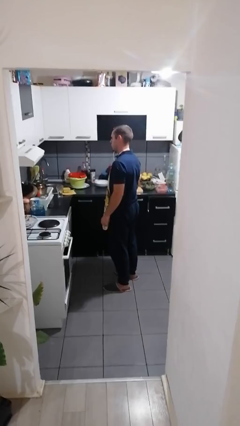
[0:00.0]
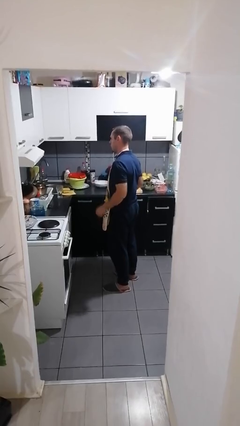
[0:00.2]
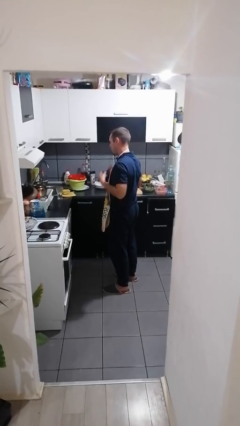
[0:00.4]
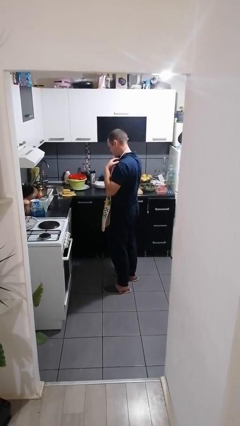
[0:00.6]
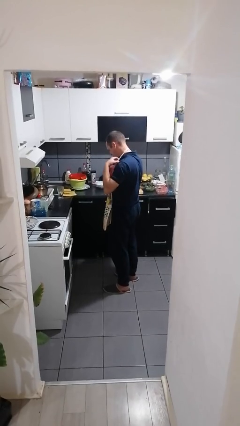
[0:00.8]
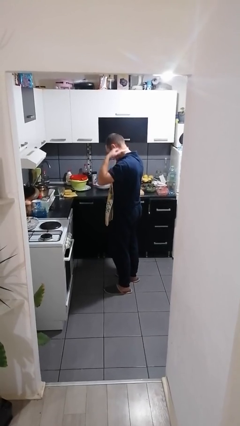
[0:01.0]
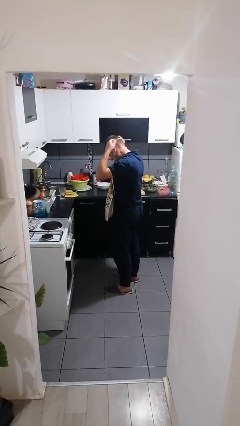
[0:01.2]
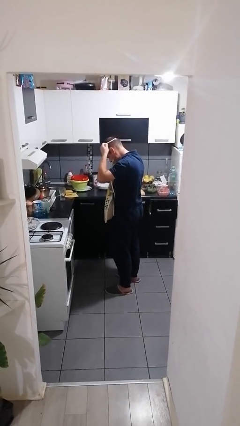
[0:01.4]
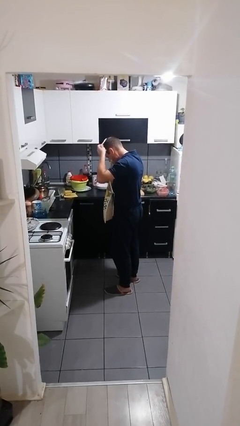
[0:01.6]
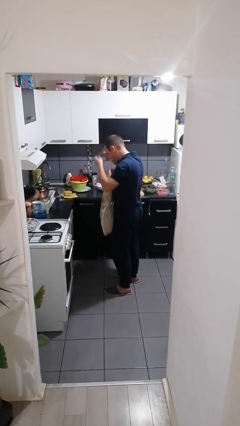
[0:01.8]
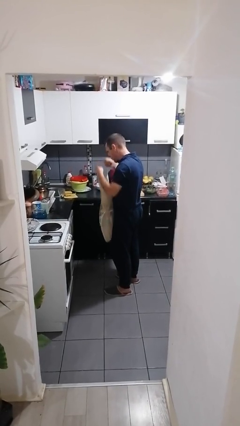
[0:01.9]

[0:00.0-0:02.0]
person takes off apron

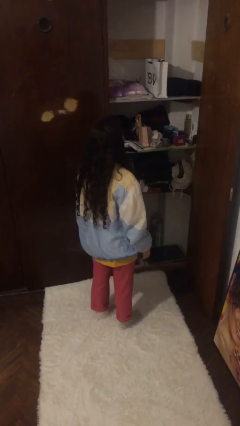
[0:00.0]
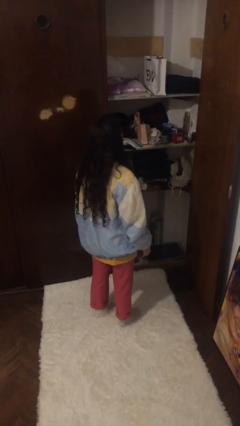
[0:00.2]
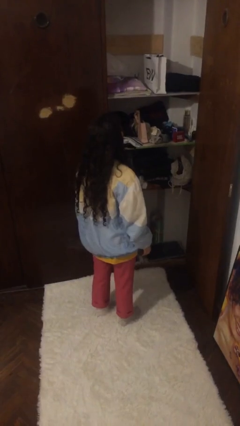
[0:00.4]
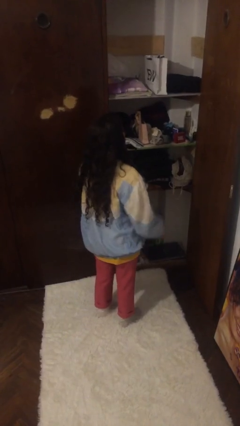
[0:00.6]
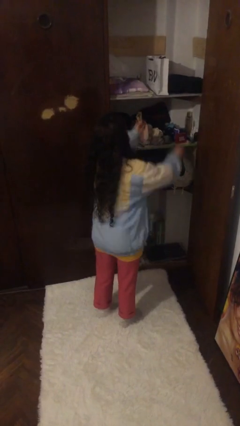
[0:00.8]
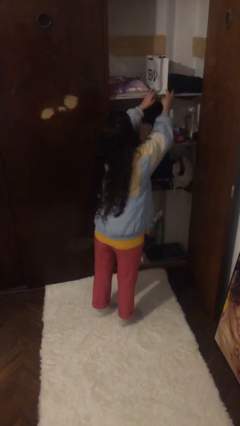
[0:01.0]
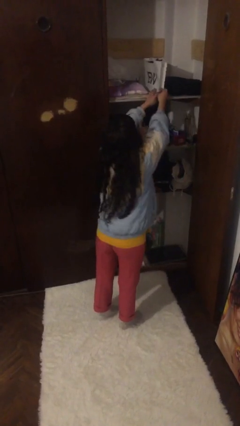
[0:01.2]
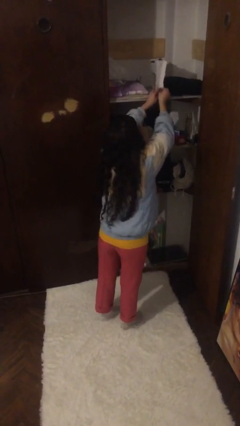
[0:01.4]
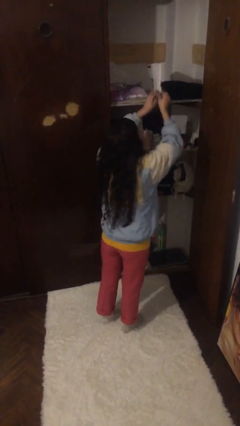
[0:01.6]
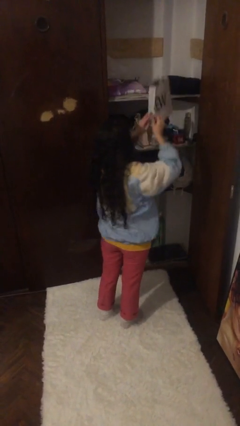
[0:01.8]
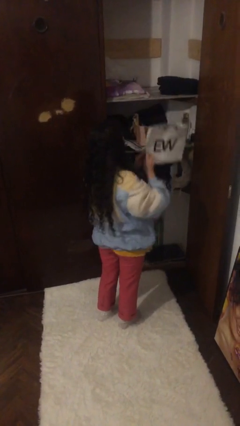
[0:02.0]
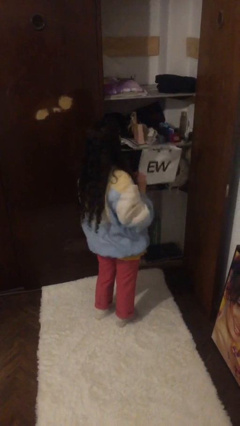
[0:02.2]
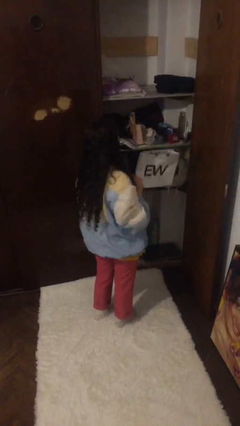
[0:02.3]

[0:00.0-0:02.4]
person picks up object from shelf

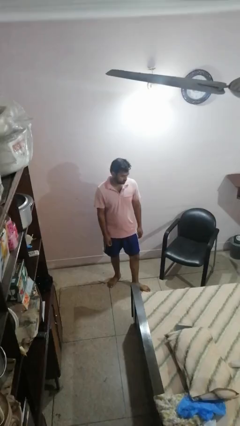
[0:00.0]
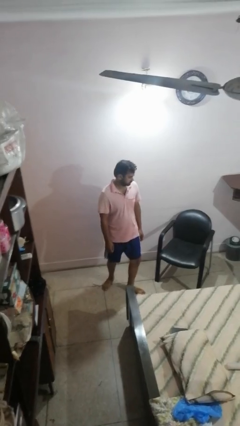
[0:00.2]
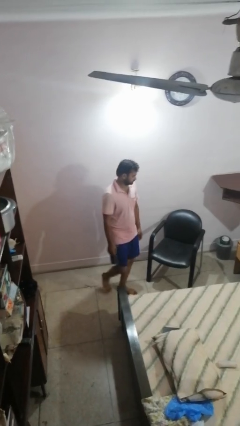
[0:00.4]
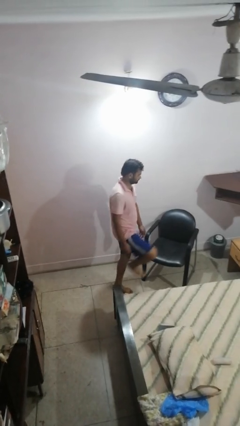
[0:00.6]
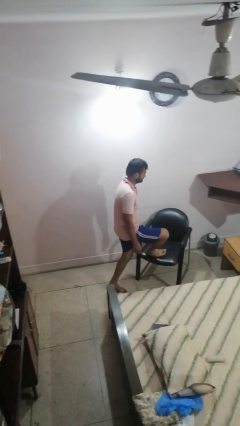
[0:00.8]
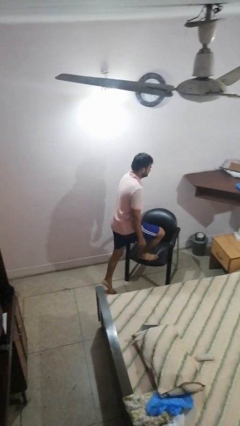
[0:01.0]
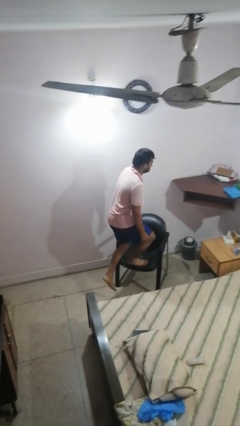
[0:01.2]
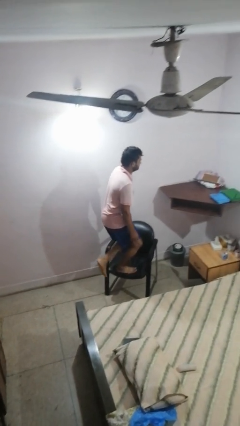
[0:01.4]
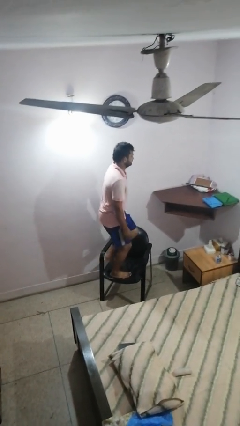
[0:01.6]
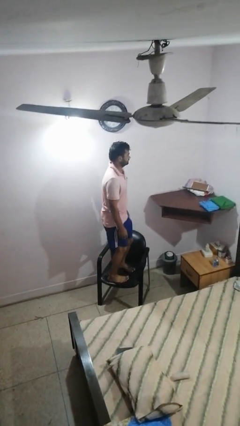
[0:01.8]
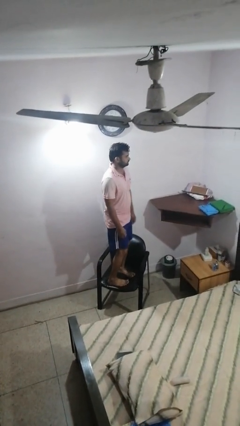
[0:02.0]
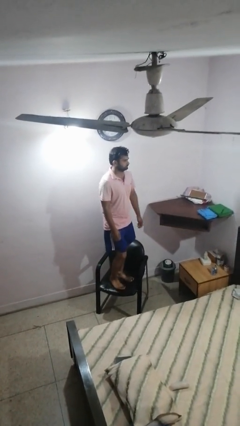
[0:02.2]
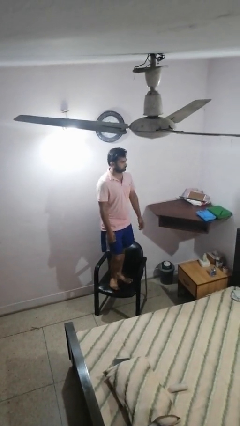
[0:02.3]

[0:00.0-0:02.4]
person climbs on chair

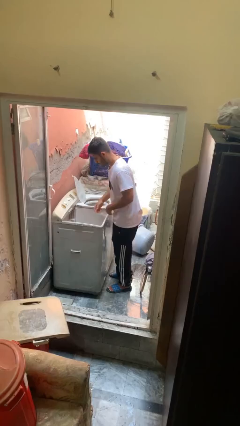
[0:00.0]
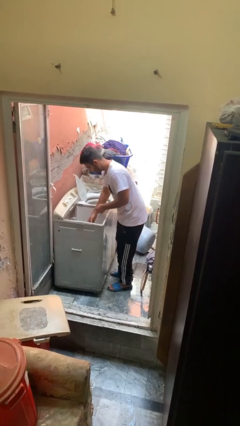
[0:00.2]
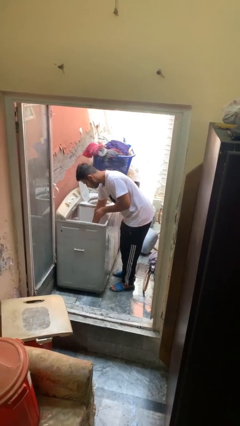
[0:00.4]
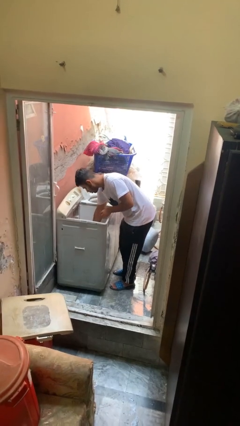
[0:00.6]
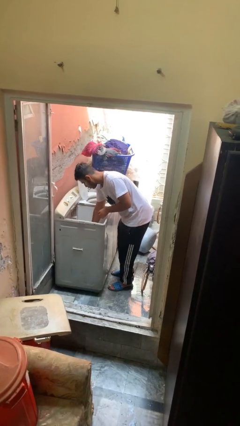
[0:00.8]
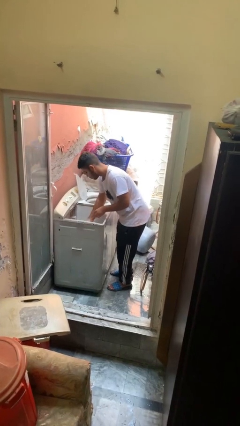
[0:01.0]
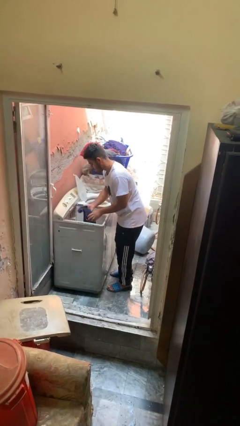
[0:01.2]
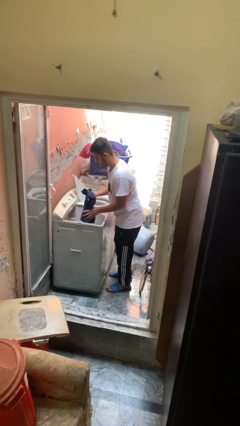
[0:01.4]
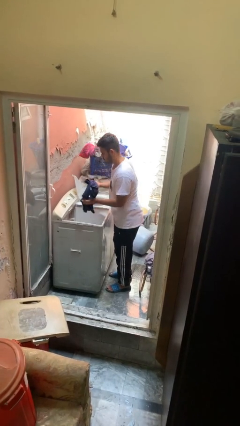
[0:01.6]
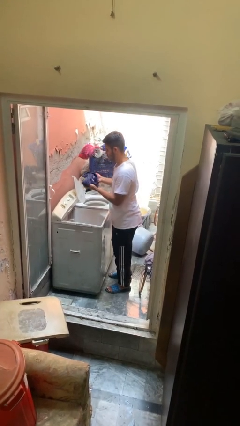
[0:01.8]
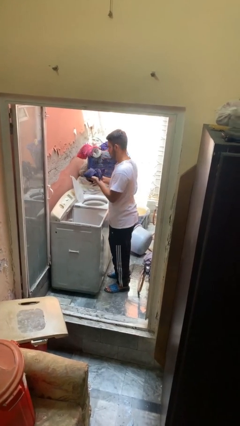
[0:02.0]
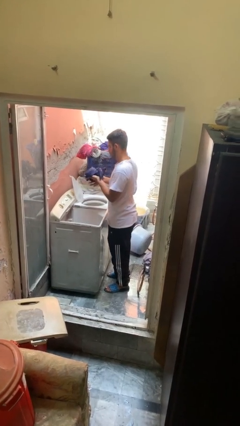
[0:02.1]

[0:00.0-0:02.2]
person unloads clotheswasher

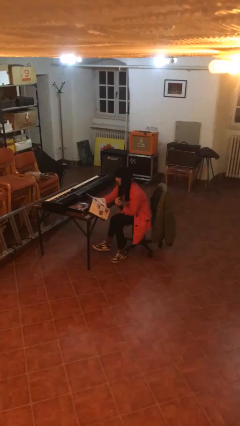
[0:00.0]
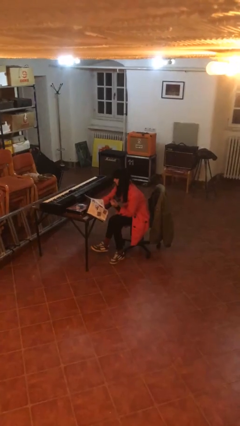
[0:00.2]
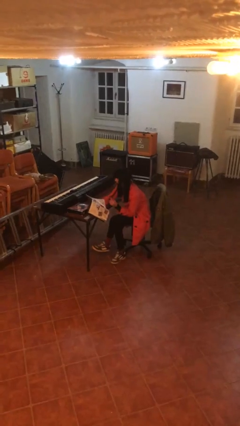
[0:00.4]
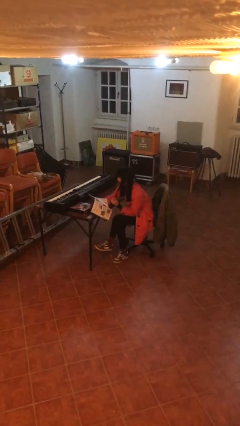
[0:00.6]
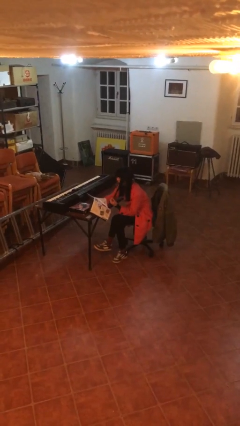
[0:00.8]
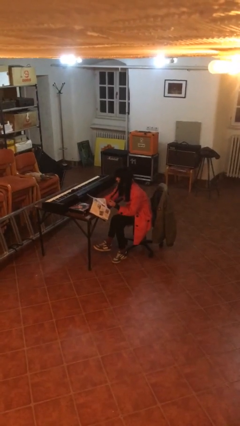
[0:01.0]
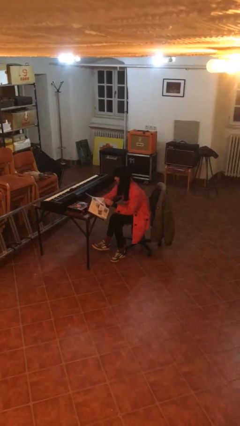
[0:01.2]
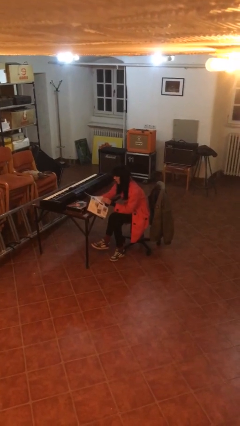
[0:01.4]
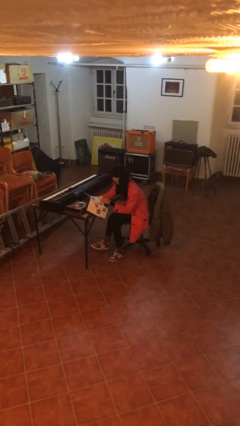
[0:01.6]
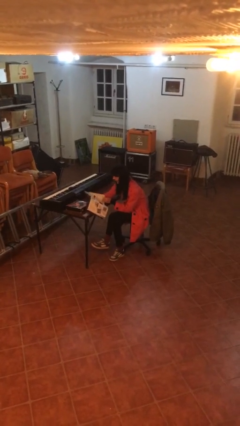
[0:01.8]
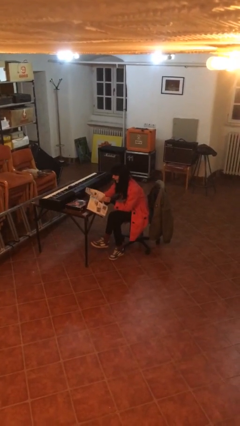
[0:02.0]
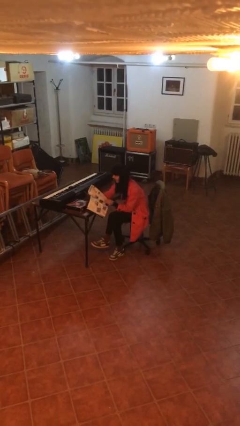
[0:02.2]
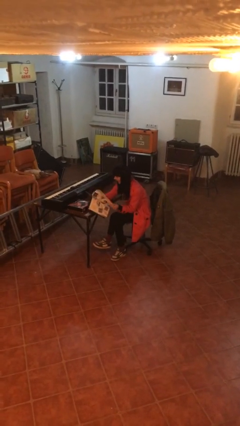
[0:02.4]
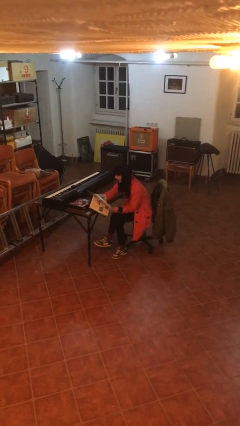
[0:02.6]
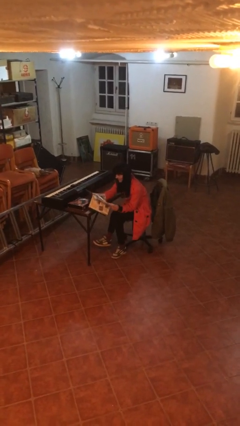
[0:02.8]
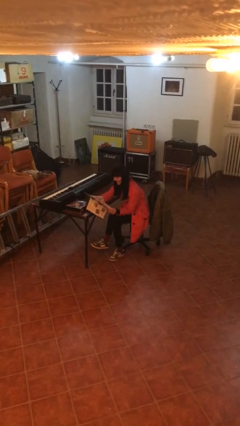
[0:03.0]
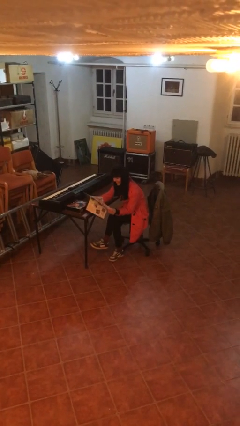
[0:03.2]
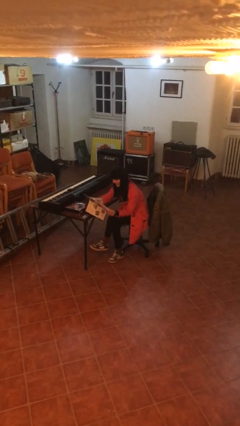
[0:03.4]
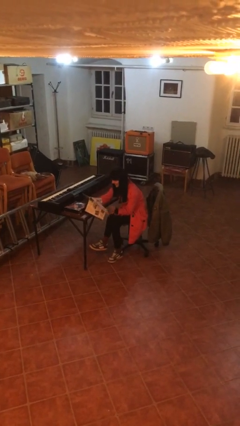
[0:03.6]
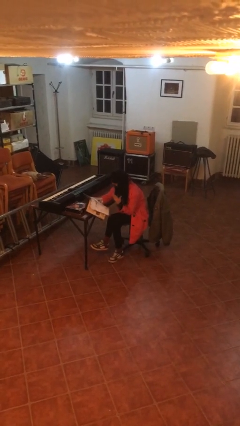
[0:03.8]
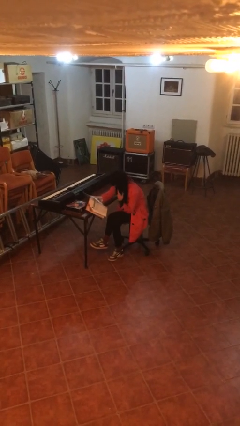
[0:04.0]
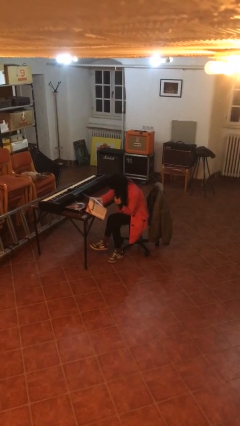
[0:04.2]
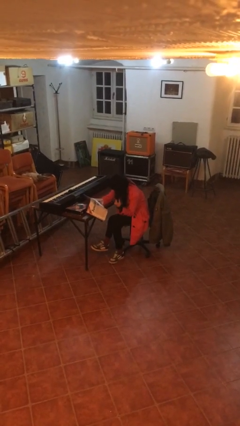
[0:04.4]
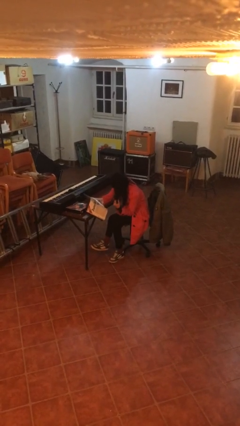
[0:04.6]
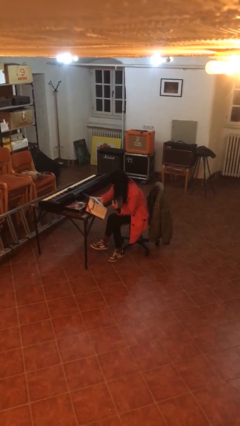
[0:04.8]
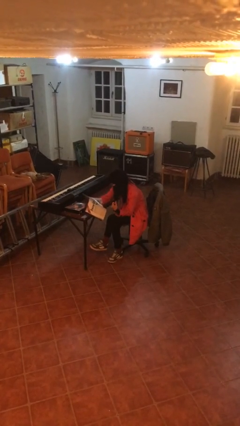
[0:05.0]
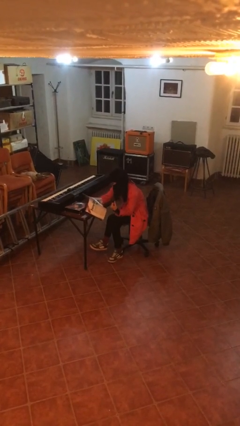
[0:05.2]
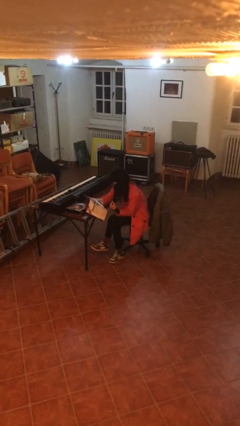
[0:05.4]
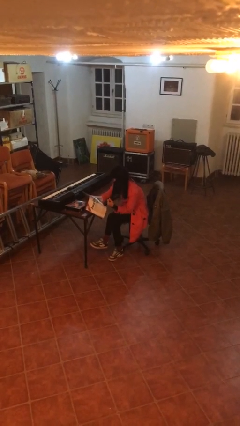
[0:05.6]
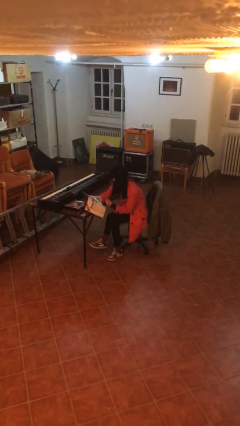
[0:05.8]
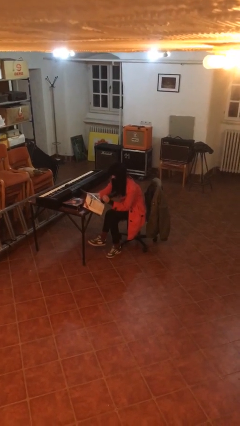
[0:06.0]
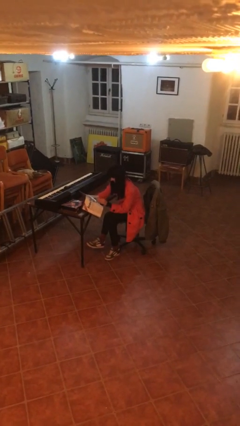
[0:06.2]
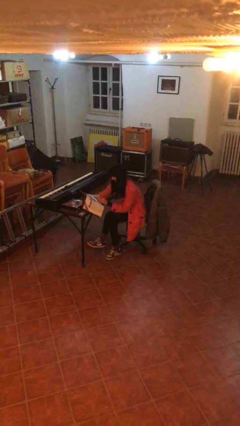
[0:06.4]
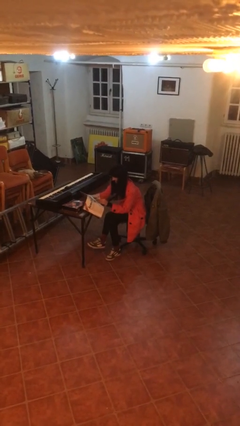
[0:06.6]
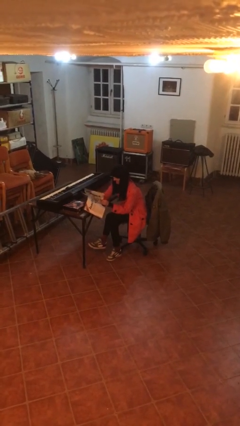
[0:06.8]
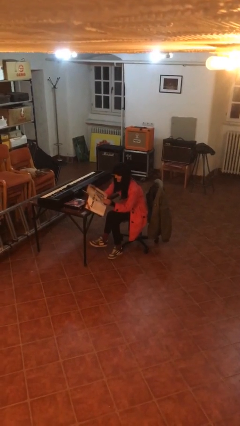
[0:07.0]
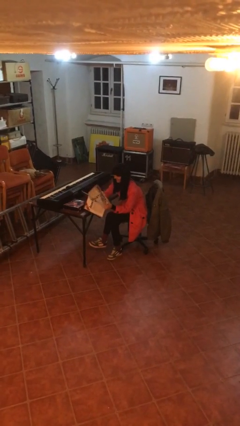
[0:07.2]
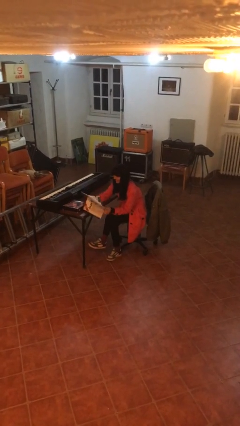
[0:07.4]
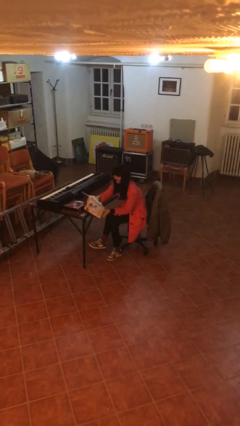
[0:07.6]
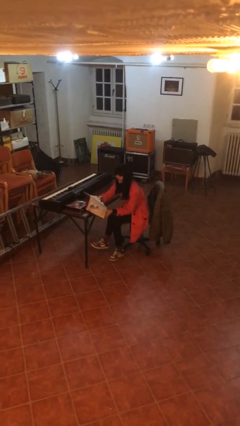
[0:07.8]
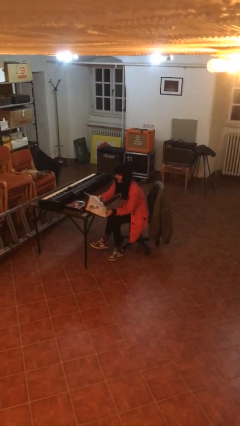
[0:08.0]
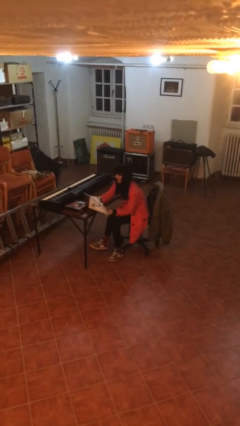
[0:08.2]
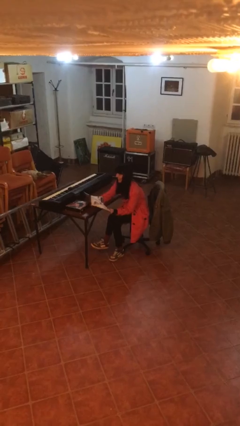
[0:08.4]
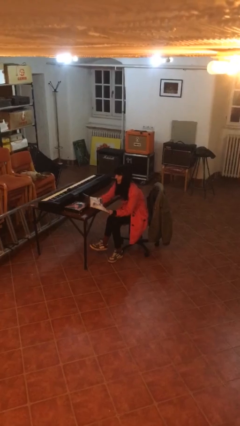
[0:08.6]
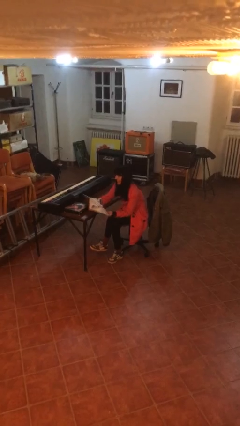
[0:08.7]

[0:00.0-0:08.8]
person reads document

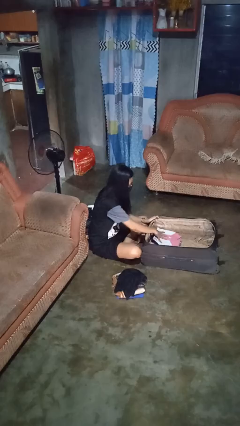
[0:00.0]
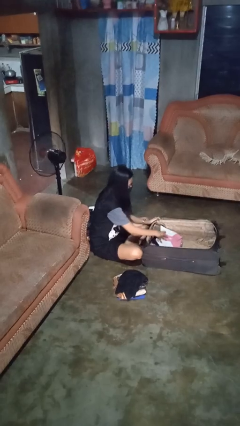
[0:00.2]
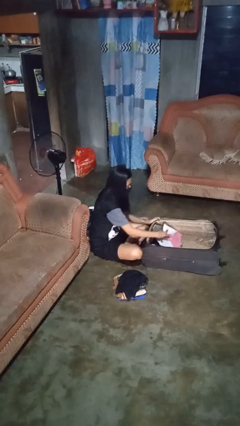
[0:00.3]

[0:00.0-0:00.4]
person unloads clothes from suitcase
